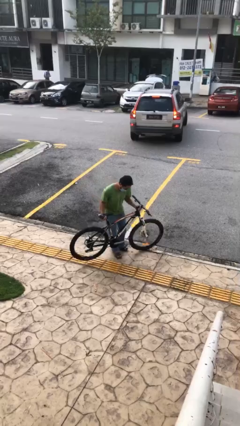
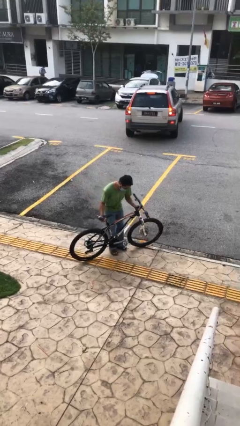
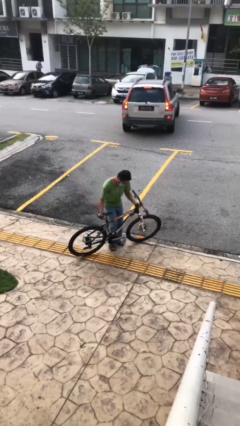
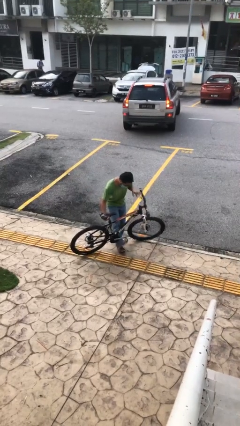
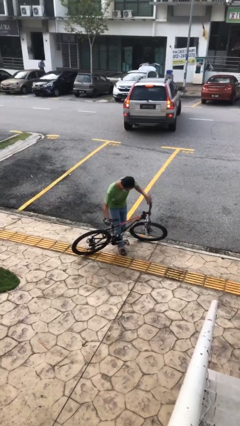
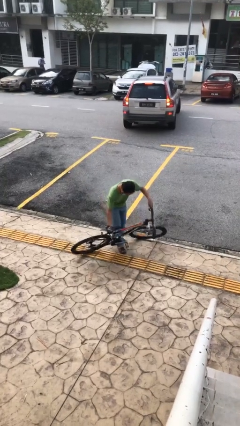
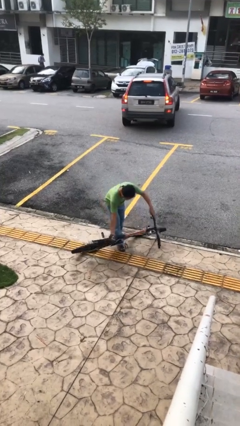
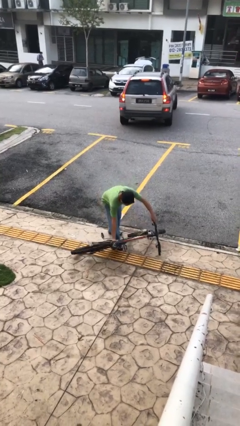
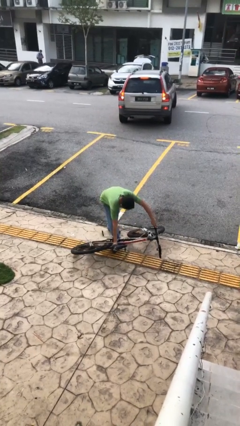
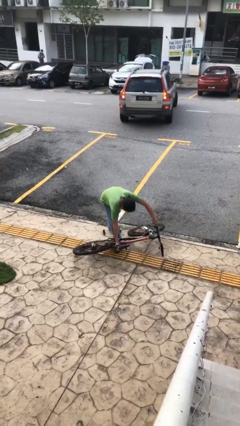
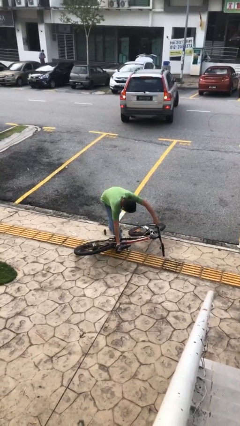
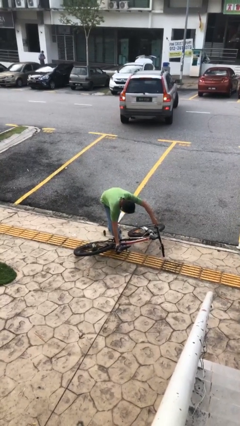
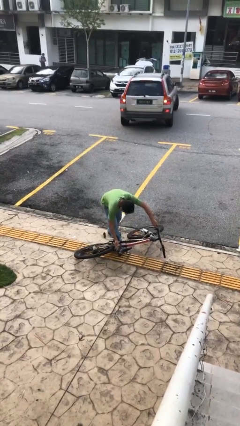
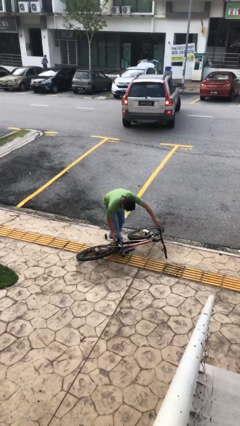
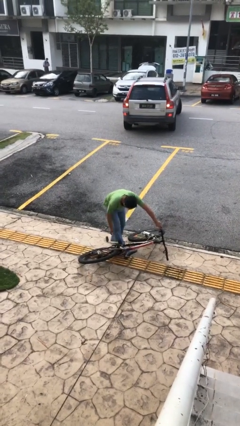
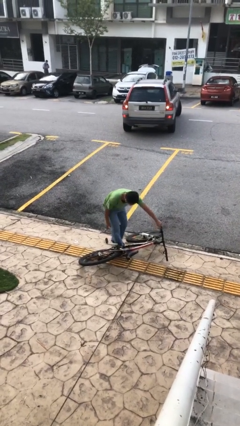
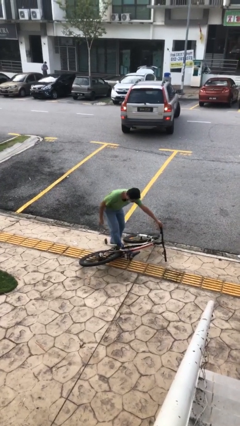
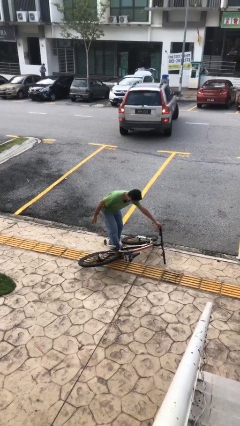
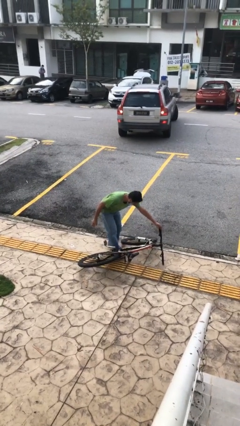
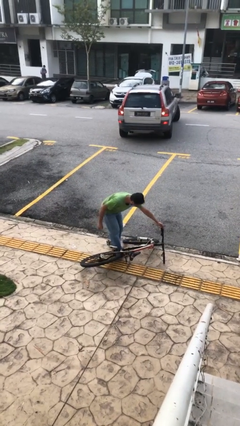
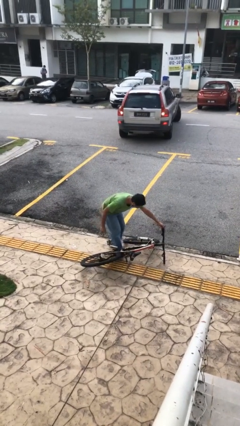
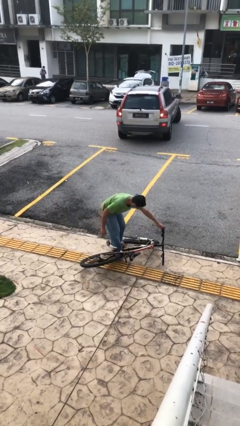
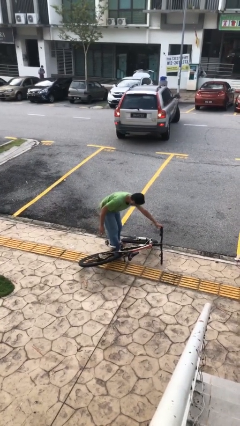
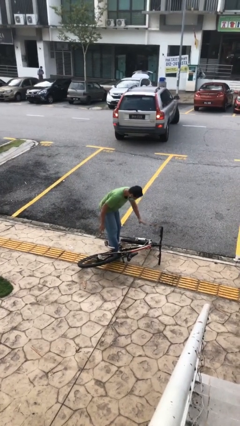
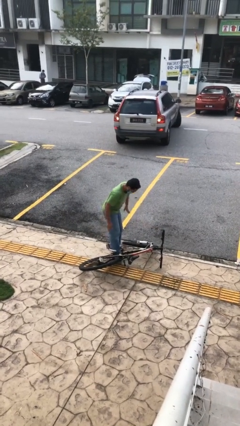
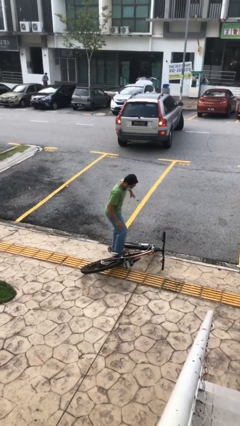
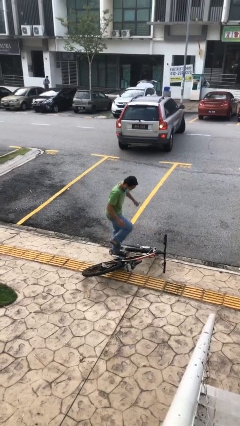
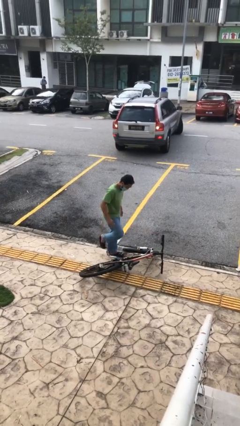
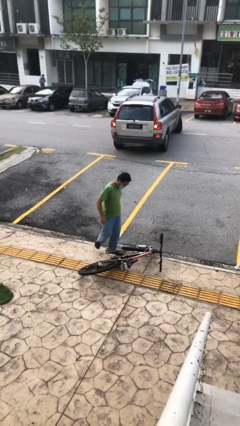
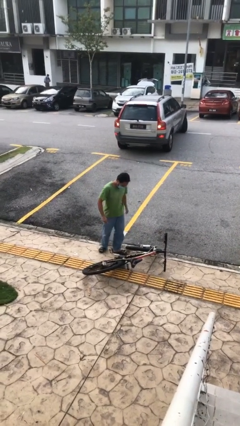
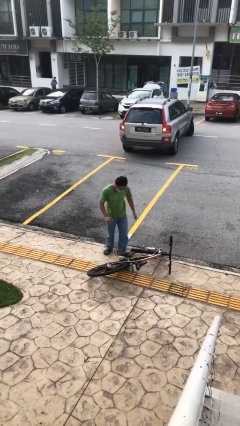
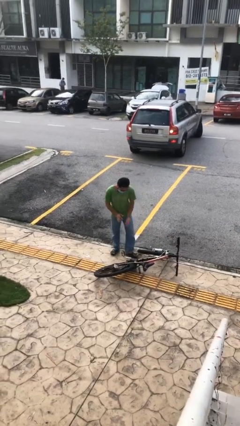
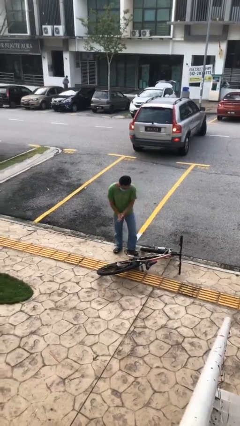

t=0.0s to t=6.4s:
person puts down object on floor

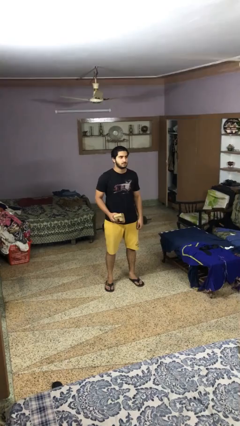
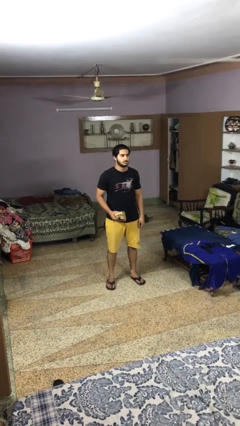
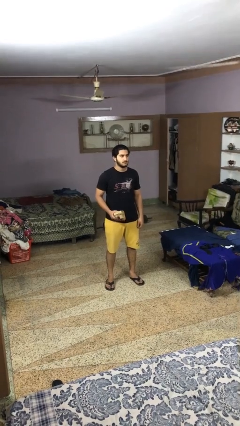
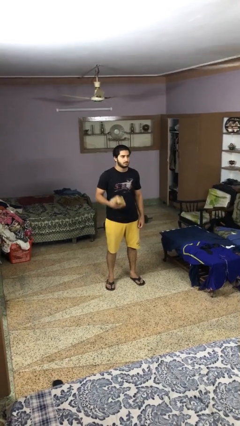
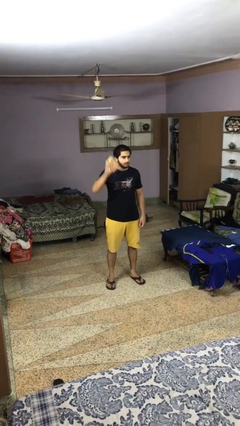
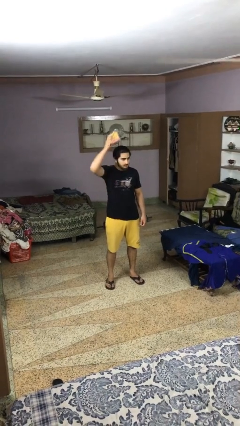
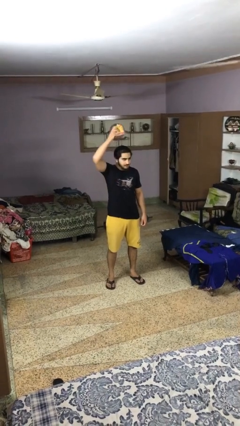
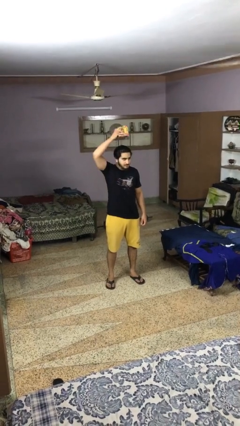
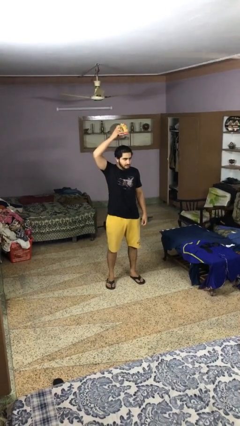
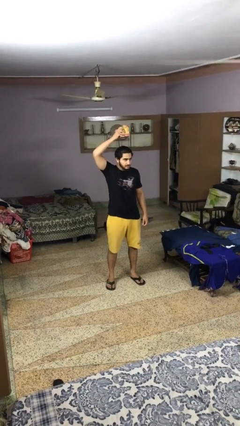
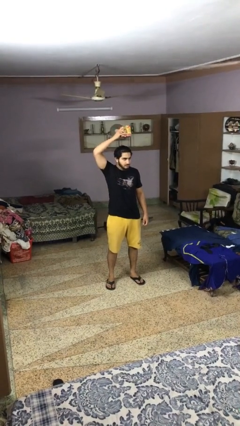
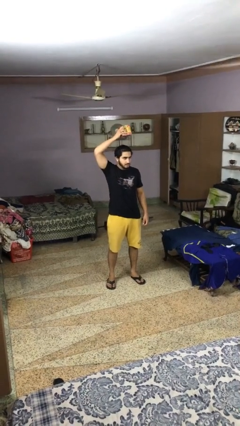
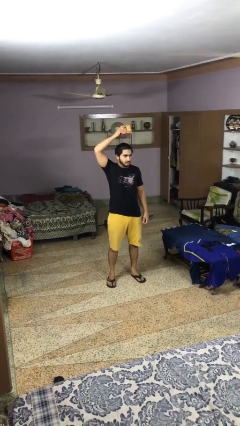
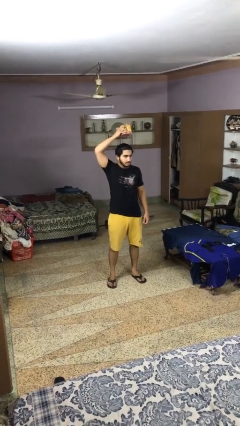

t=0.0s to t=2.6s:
person holds object above head

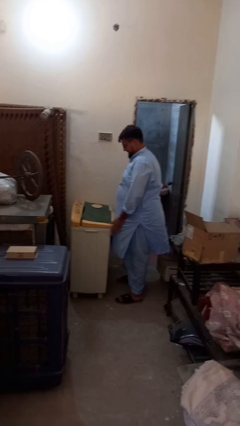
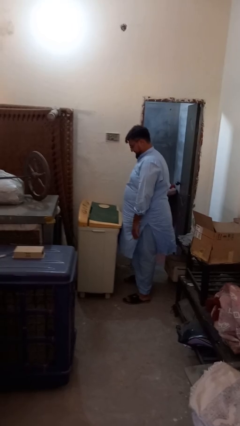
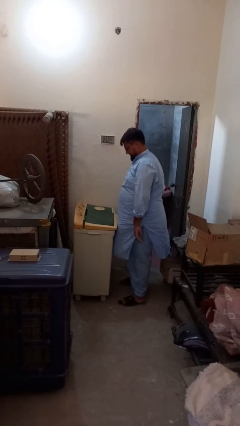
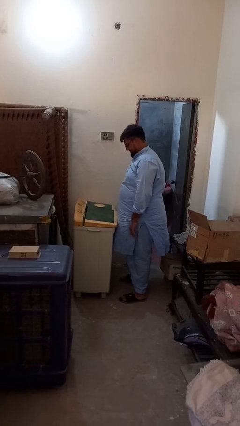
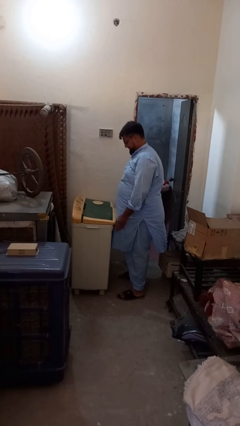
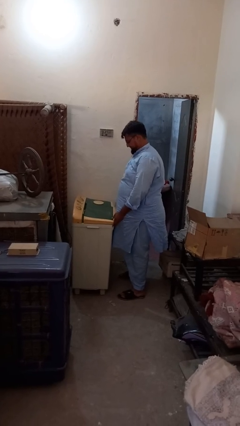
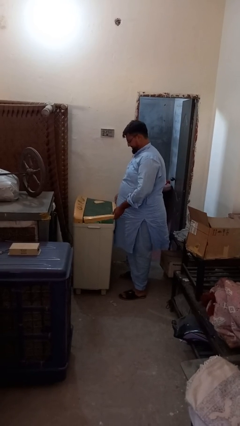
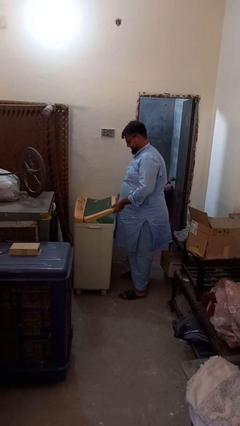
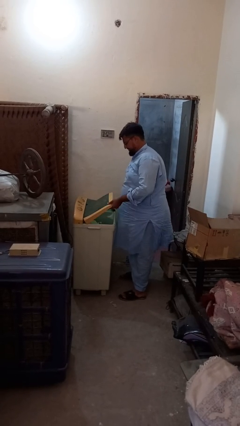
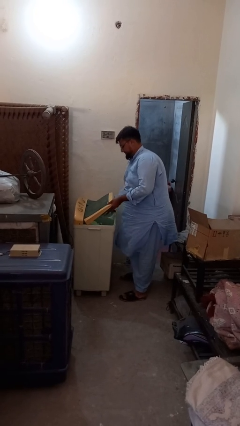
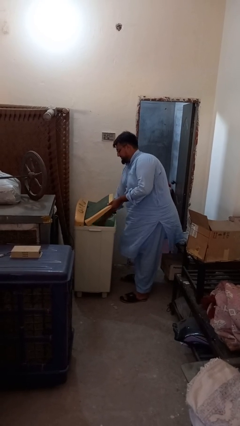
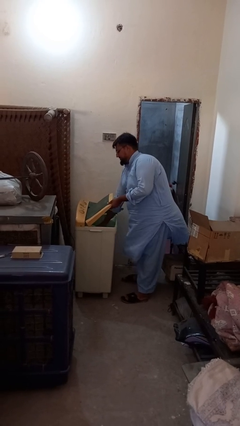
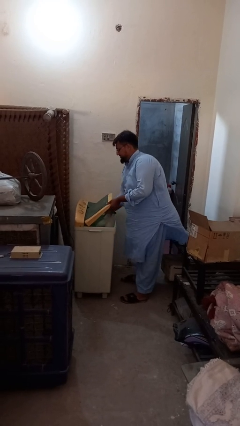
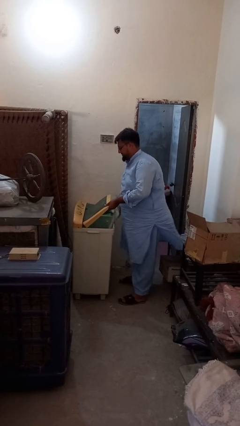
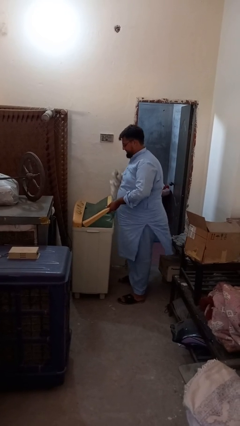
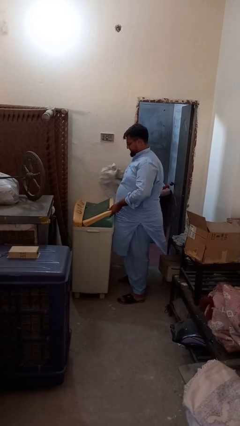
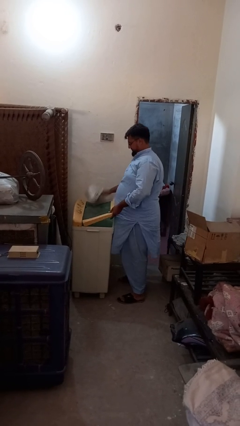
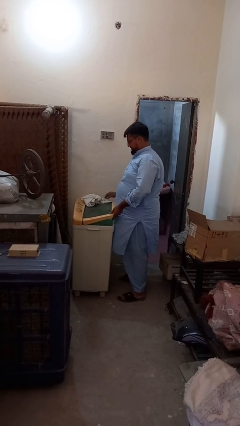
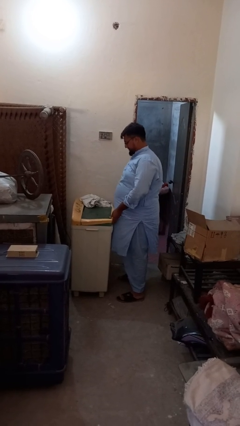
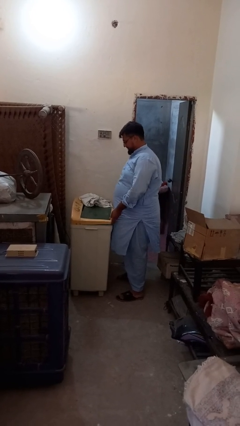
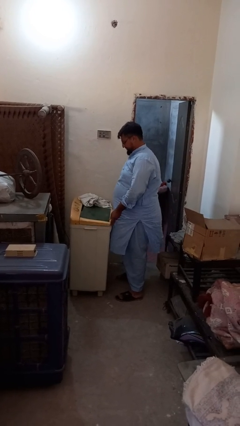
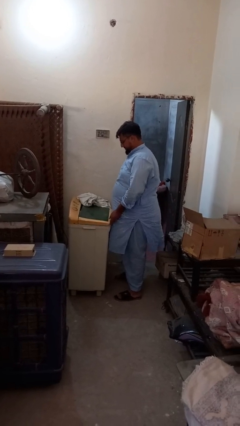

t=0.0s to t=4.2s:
person unloads clotheswasher

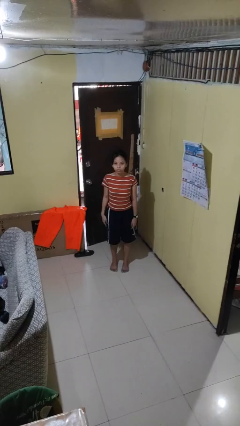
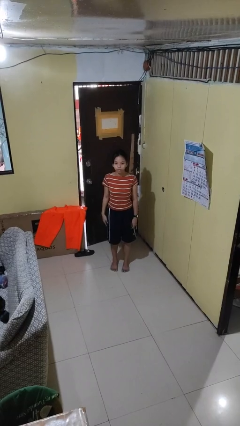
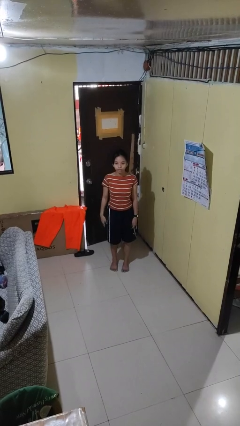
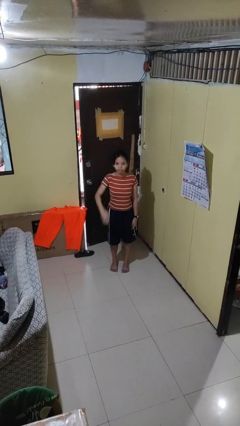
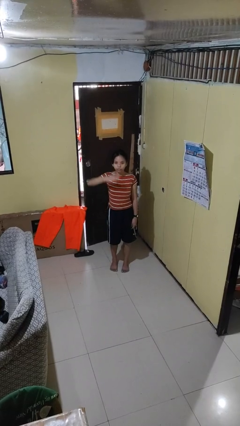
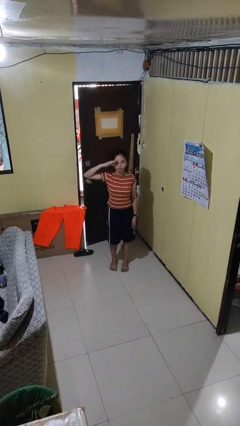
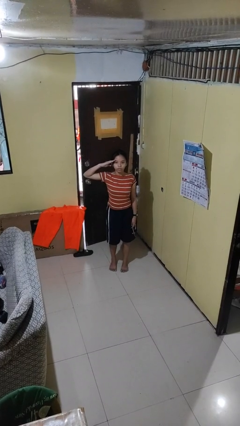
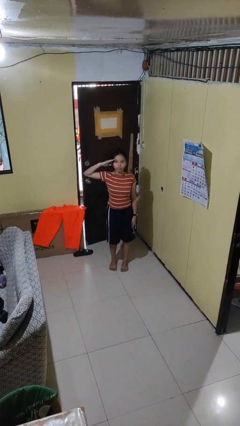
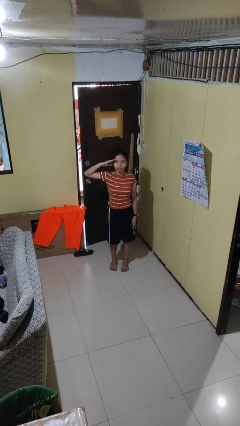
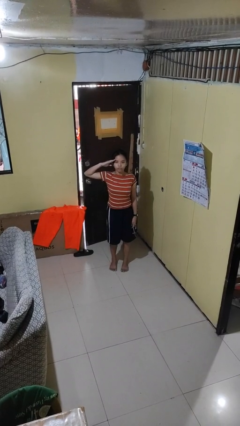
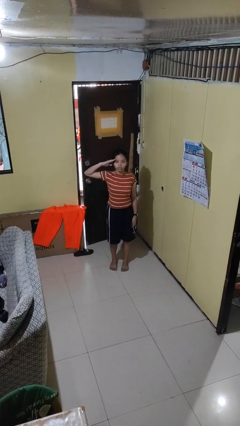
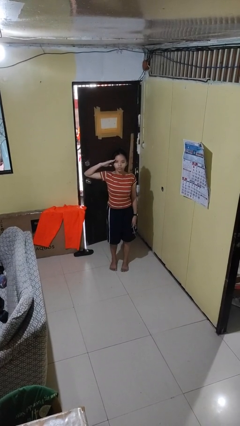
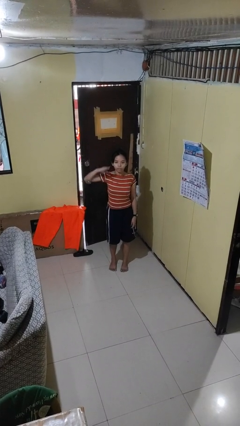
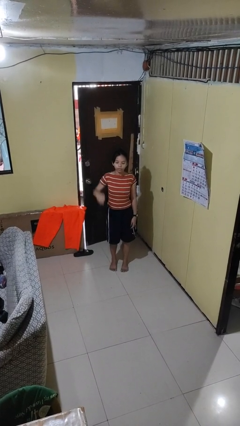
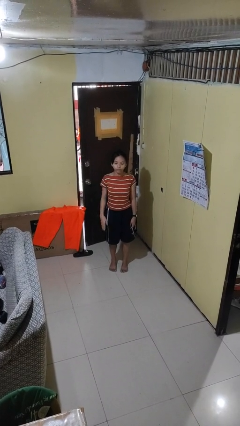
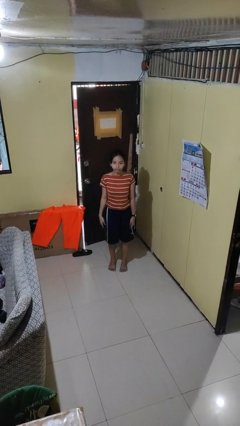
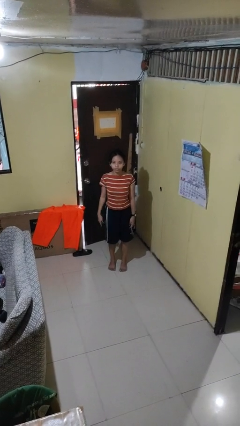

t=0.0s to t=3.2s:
person salutes

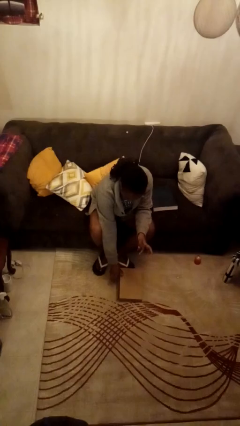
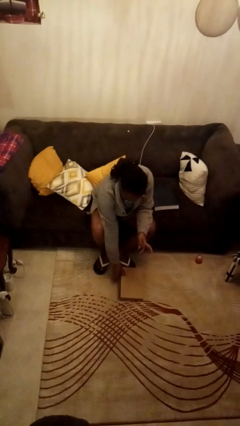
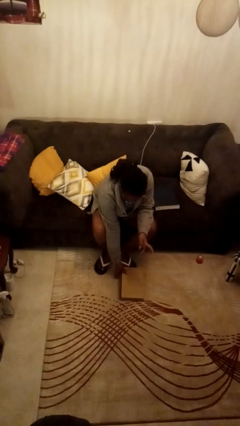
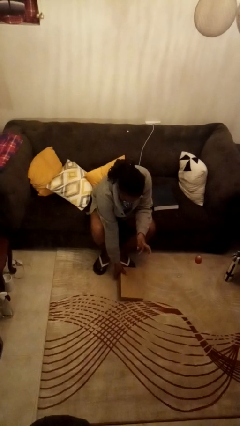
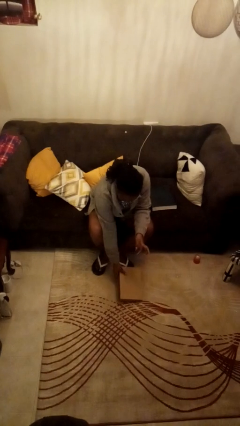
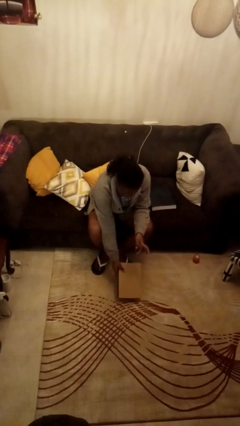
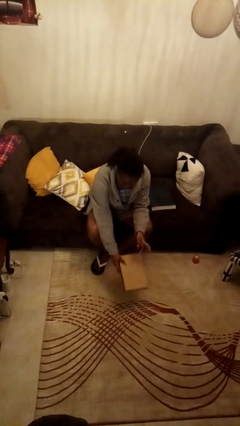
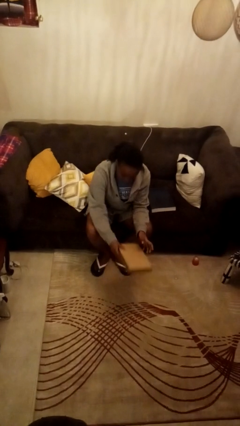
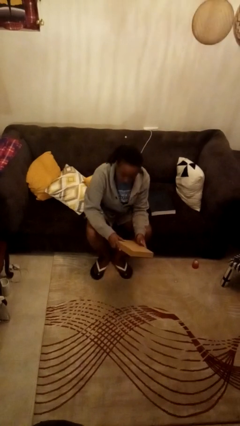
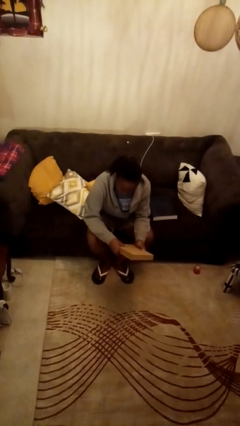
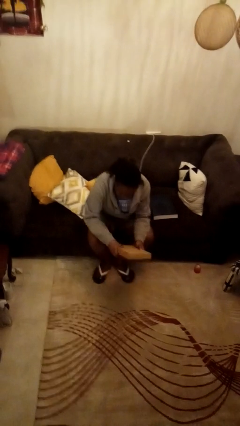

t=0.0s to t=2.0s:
person picks up object from floor
